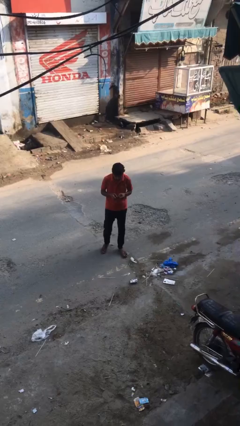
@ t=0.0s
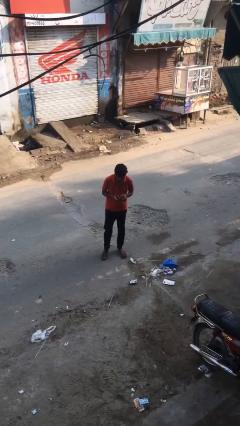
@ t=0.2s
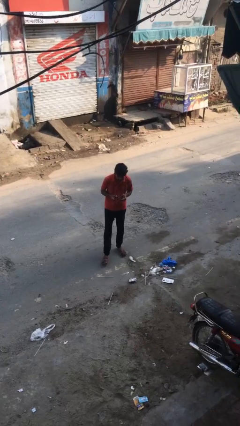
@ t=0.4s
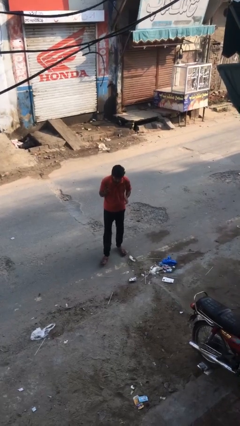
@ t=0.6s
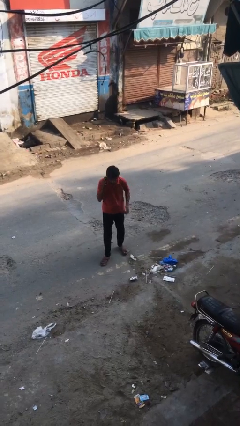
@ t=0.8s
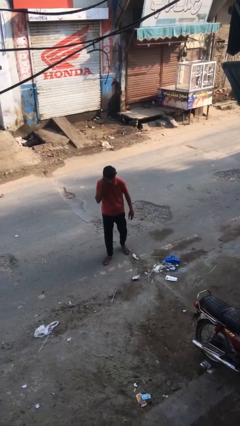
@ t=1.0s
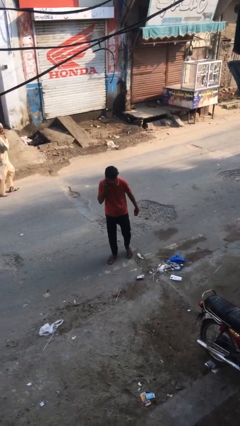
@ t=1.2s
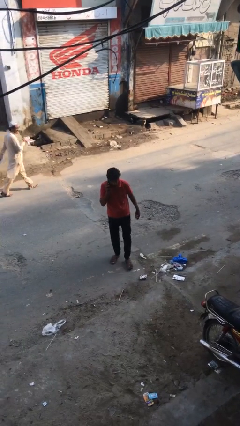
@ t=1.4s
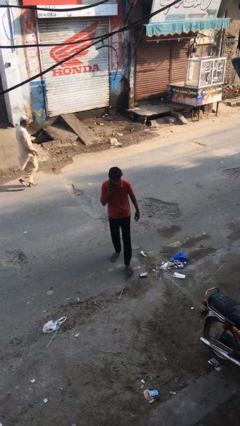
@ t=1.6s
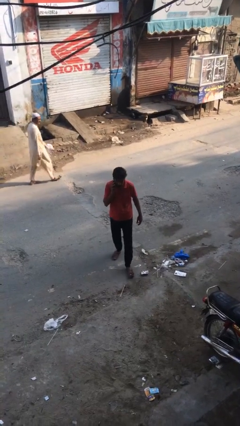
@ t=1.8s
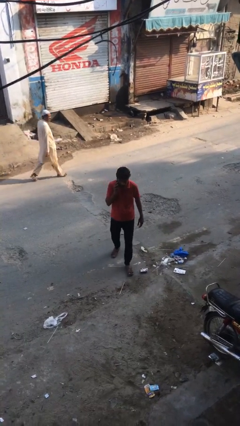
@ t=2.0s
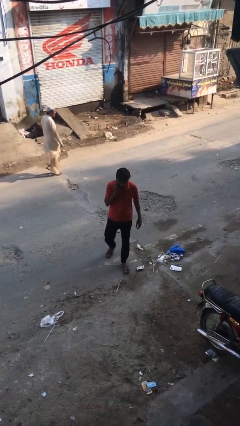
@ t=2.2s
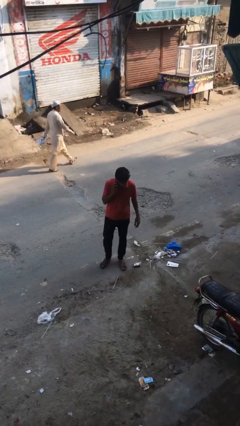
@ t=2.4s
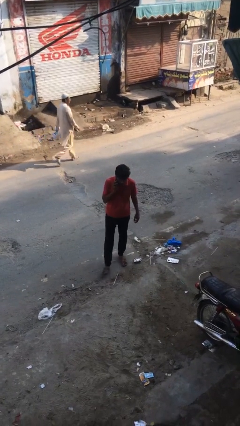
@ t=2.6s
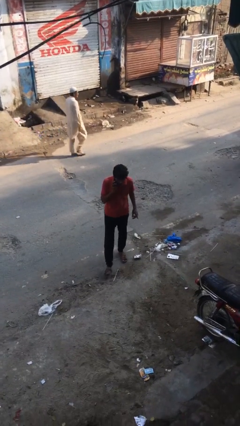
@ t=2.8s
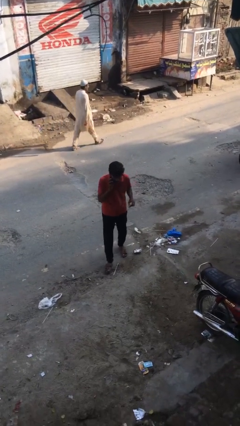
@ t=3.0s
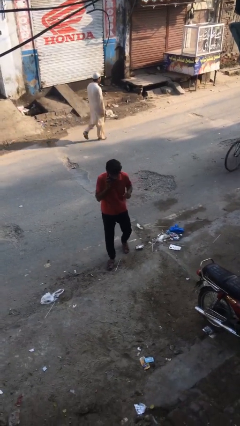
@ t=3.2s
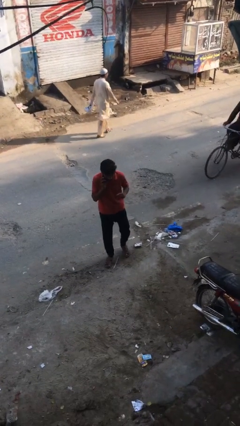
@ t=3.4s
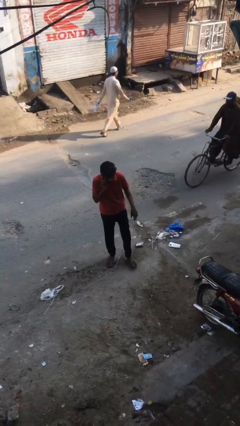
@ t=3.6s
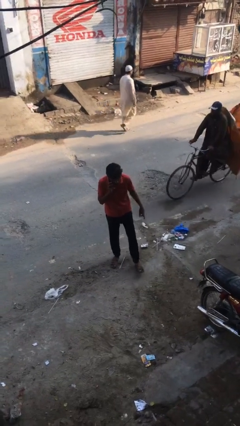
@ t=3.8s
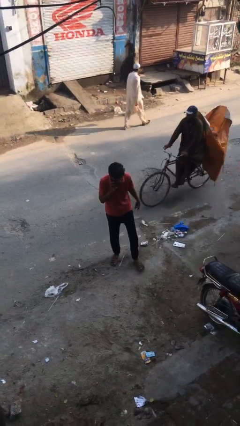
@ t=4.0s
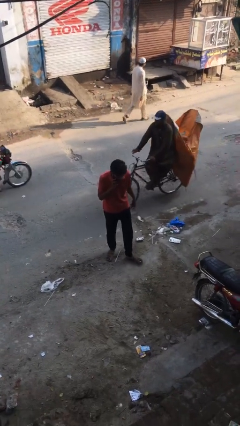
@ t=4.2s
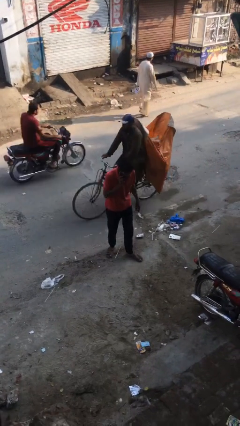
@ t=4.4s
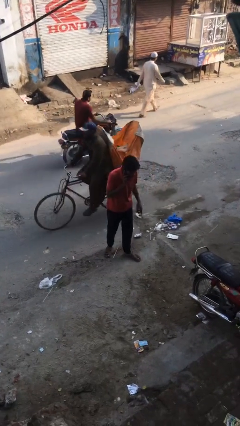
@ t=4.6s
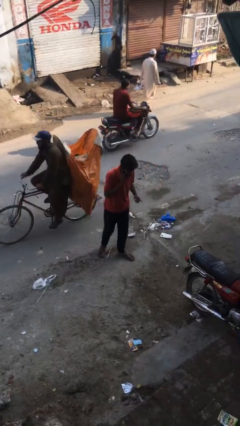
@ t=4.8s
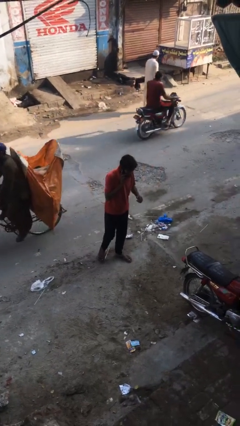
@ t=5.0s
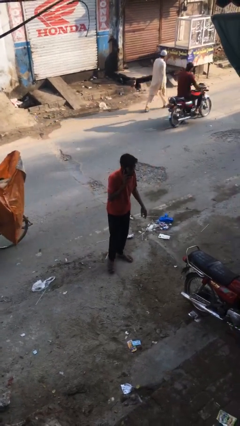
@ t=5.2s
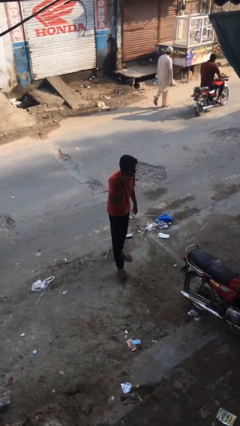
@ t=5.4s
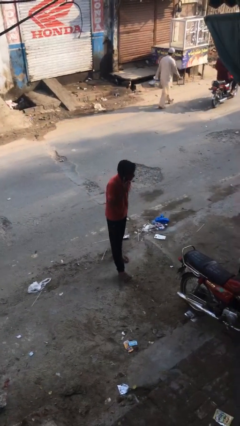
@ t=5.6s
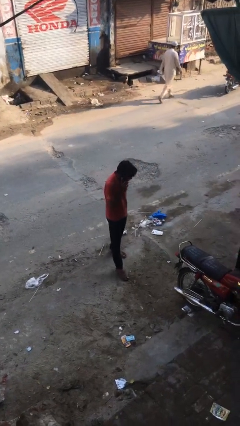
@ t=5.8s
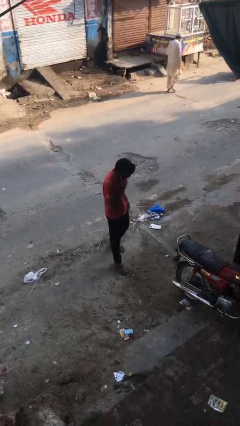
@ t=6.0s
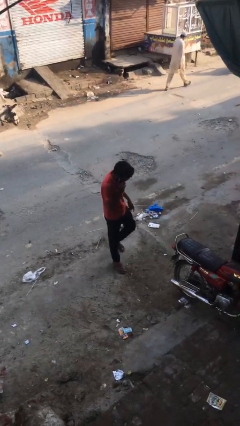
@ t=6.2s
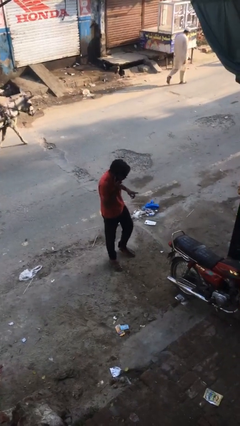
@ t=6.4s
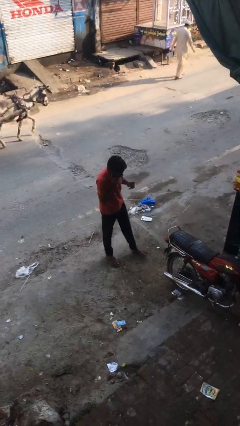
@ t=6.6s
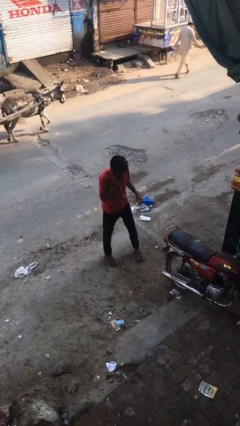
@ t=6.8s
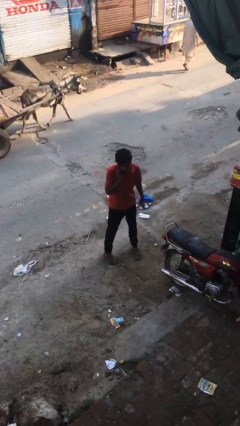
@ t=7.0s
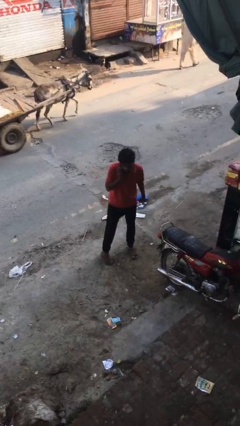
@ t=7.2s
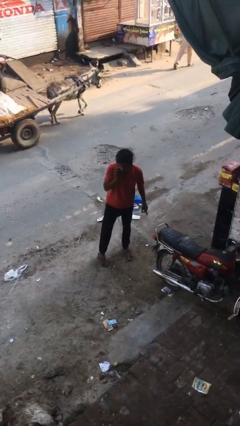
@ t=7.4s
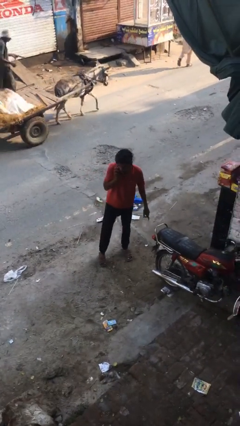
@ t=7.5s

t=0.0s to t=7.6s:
person talks on phone

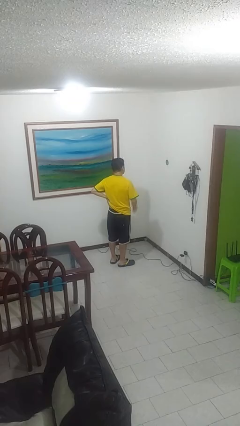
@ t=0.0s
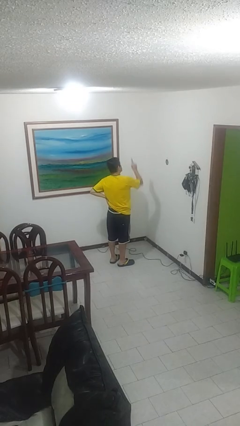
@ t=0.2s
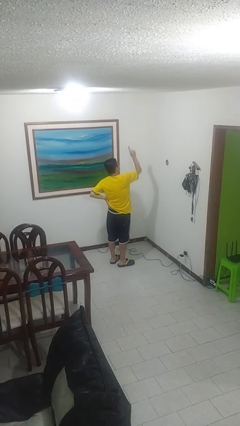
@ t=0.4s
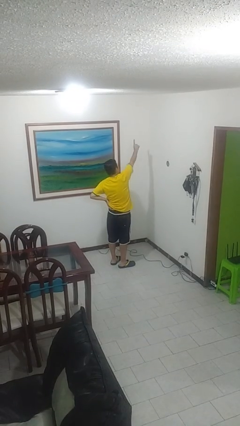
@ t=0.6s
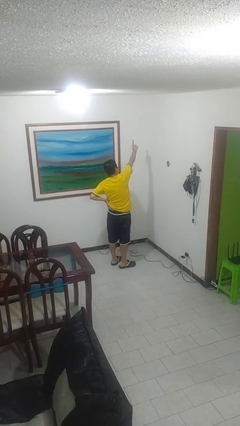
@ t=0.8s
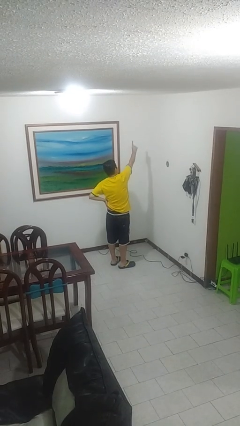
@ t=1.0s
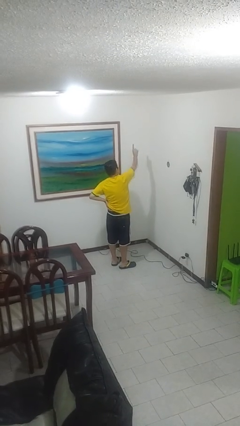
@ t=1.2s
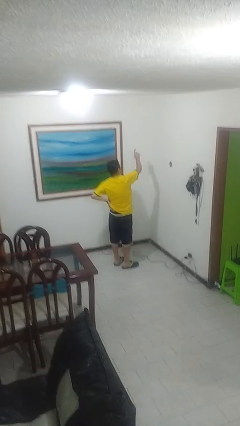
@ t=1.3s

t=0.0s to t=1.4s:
person gestures number one

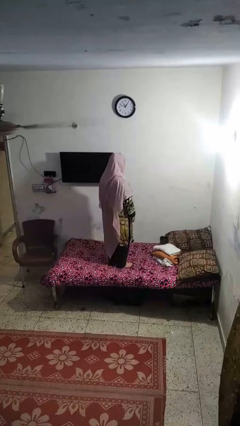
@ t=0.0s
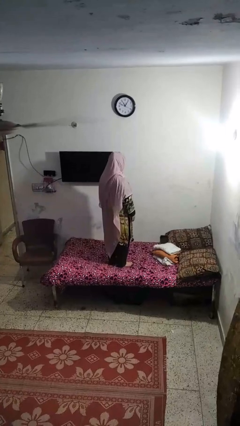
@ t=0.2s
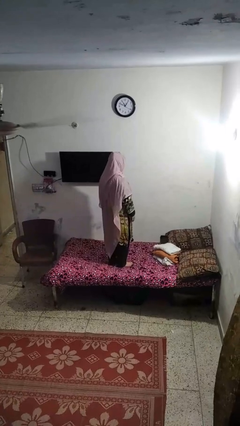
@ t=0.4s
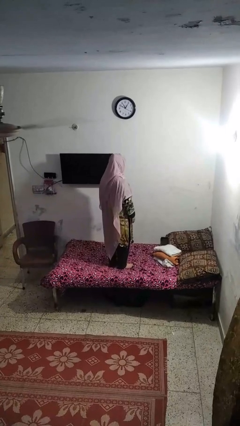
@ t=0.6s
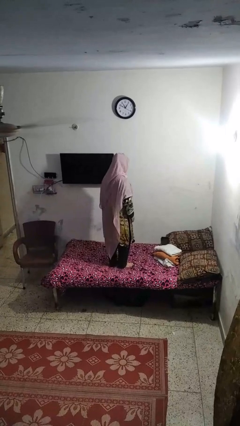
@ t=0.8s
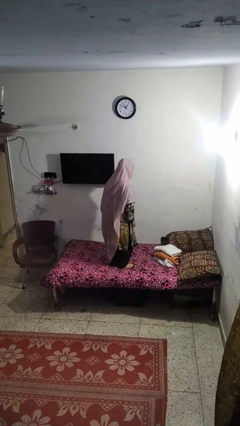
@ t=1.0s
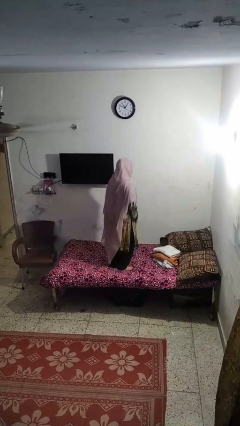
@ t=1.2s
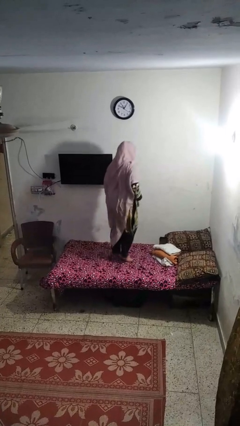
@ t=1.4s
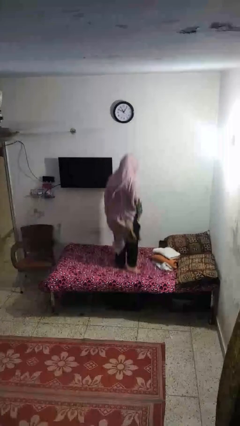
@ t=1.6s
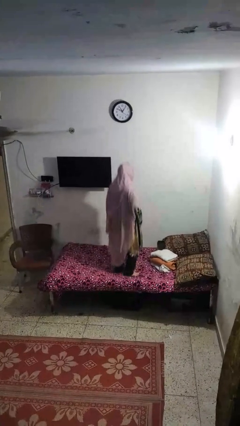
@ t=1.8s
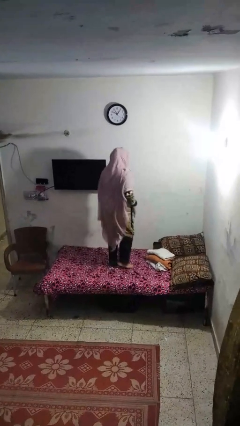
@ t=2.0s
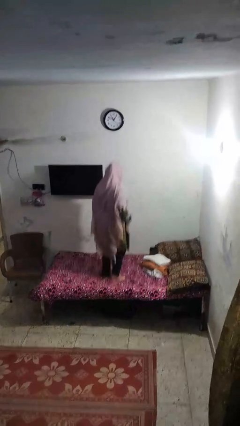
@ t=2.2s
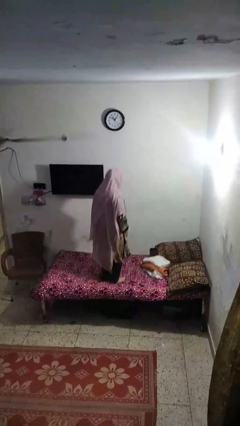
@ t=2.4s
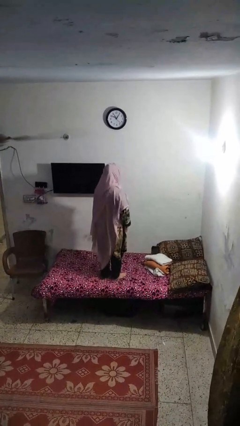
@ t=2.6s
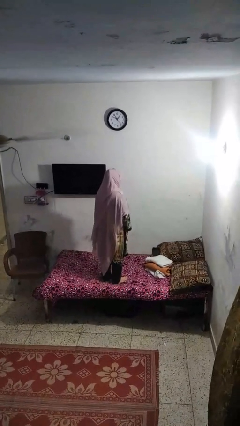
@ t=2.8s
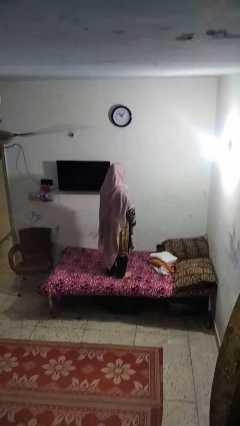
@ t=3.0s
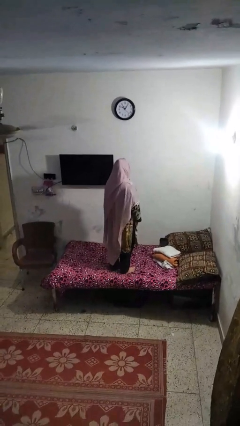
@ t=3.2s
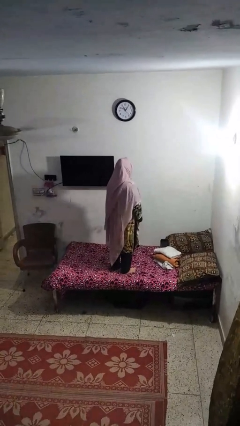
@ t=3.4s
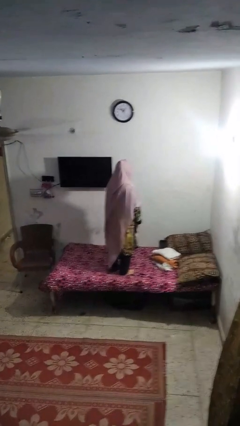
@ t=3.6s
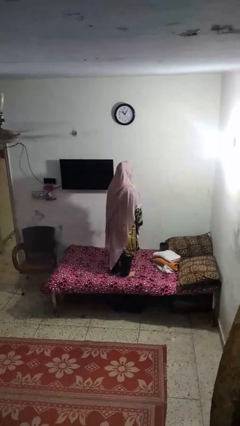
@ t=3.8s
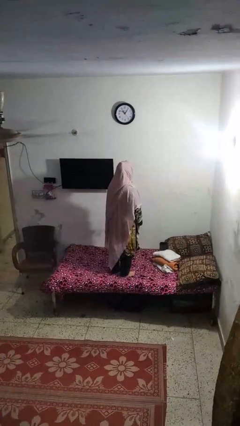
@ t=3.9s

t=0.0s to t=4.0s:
person jumps on bed

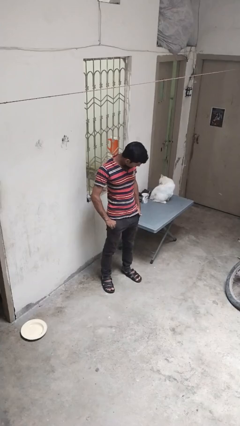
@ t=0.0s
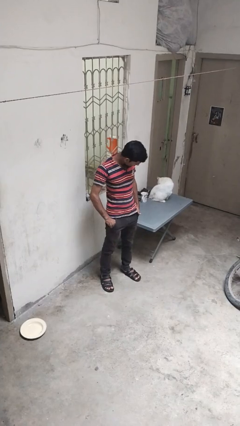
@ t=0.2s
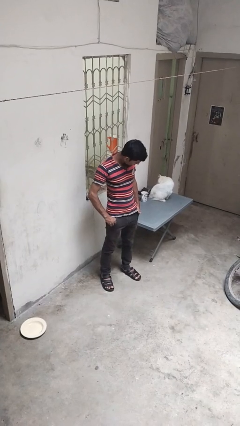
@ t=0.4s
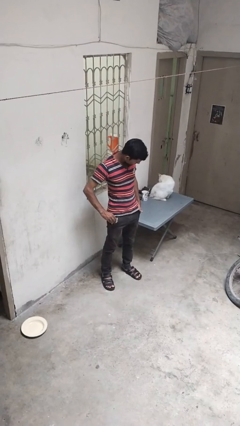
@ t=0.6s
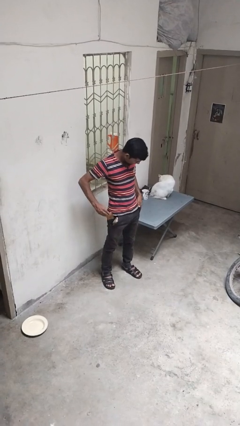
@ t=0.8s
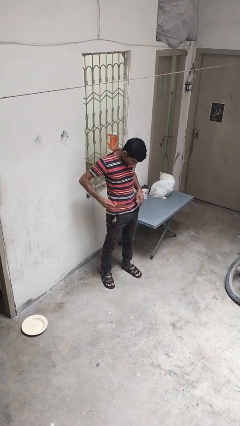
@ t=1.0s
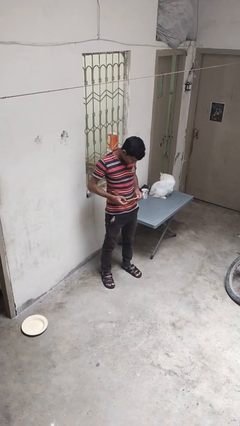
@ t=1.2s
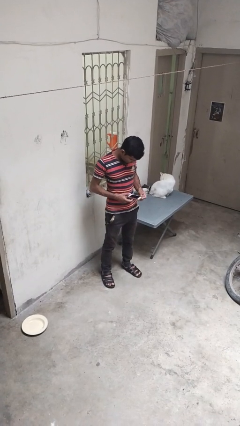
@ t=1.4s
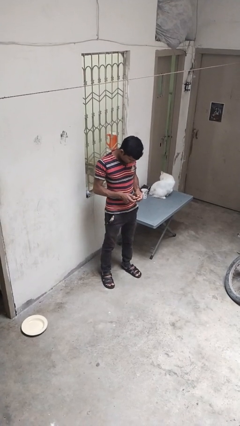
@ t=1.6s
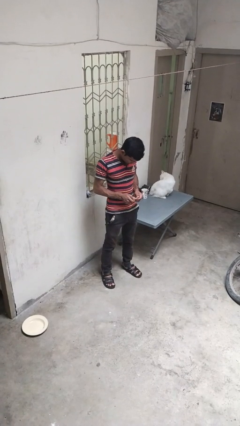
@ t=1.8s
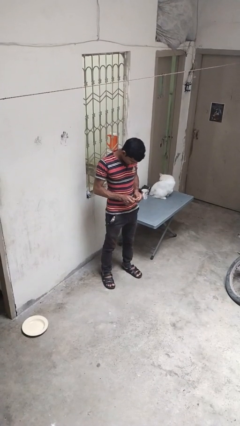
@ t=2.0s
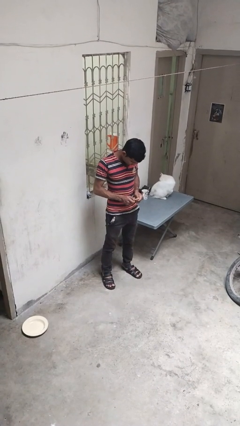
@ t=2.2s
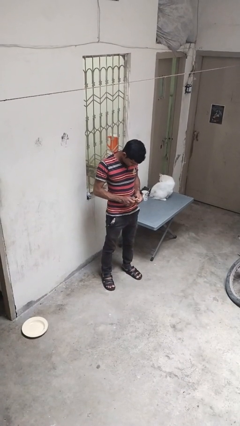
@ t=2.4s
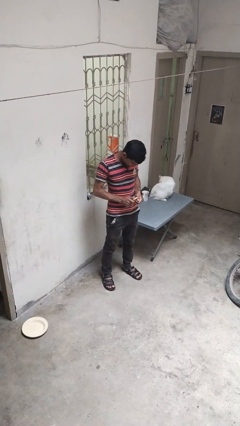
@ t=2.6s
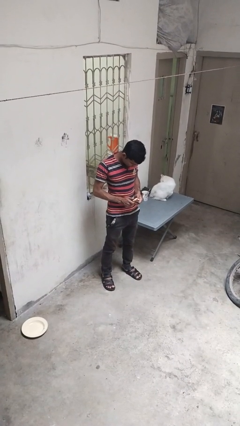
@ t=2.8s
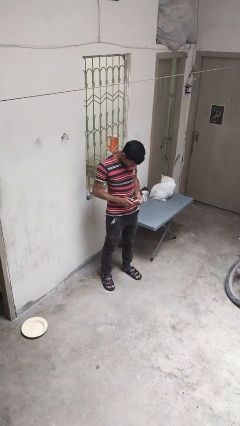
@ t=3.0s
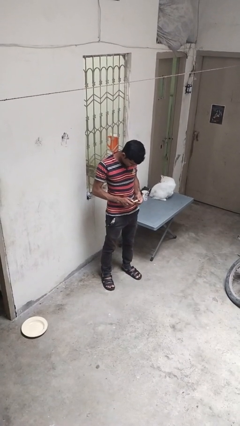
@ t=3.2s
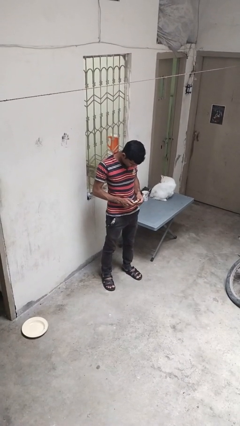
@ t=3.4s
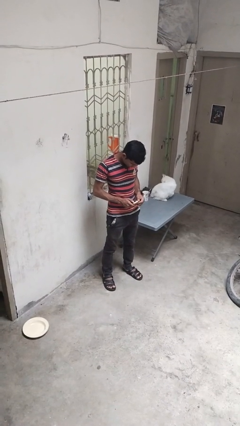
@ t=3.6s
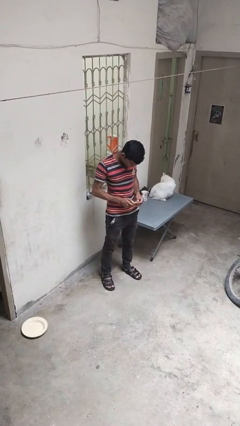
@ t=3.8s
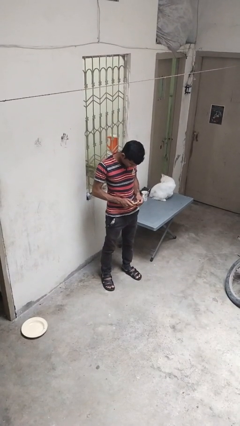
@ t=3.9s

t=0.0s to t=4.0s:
person takes phone from pocket

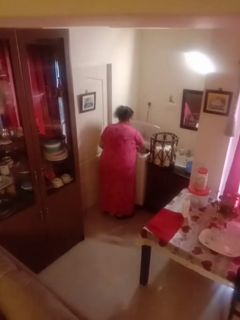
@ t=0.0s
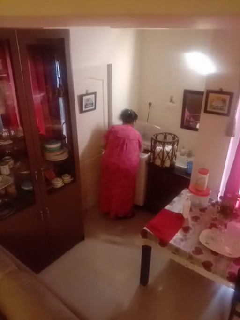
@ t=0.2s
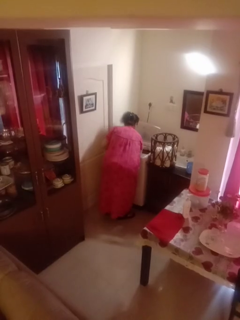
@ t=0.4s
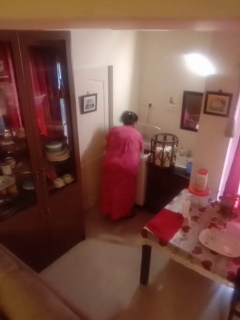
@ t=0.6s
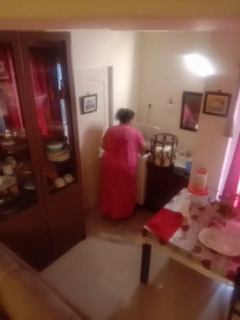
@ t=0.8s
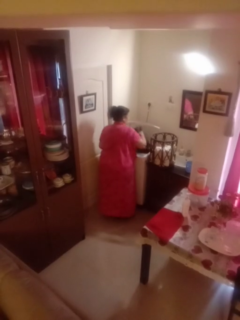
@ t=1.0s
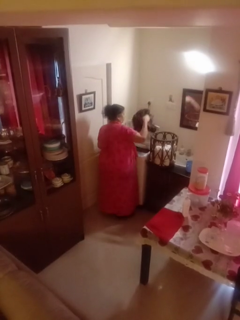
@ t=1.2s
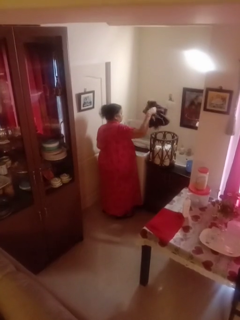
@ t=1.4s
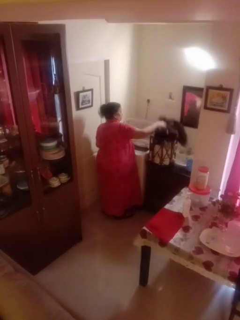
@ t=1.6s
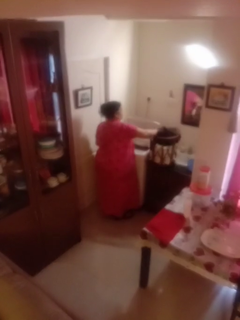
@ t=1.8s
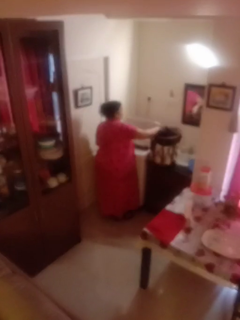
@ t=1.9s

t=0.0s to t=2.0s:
person unloads dryer
